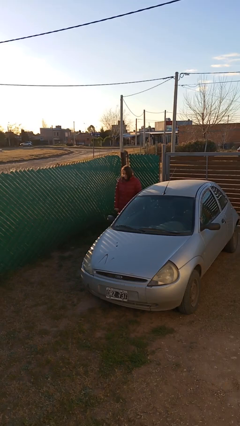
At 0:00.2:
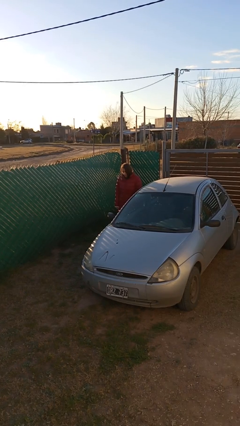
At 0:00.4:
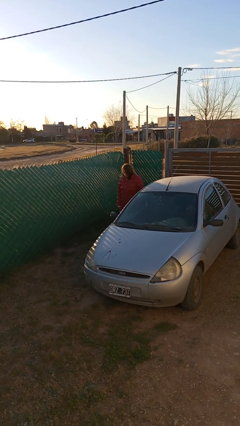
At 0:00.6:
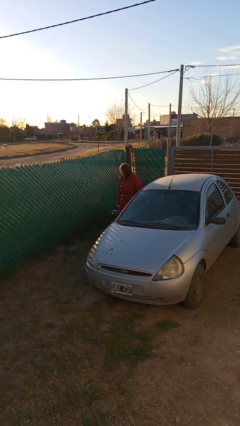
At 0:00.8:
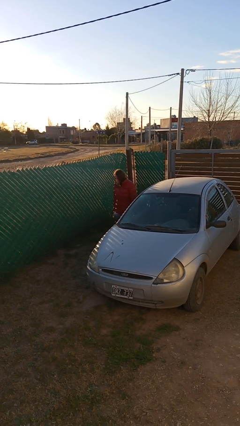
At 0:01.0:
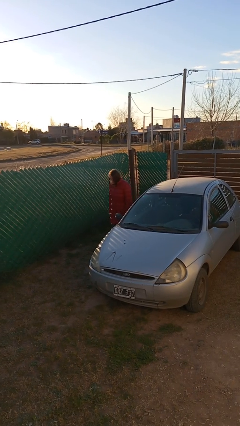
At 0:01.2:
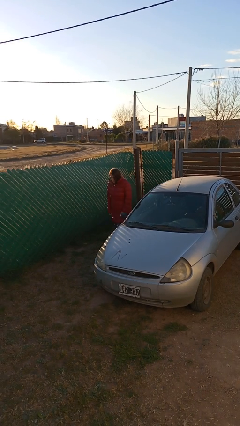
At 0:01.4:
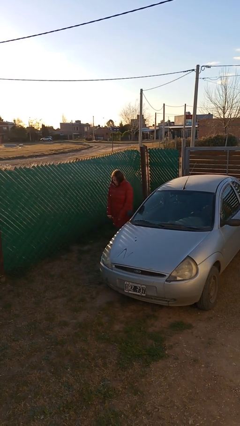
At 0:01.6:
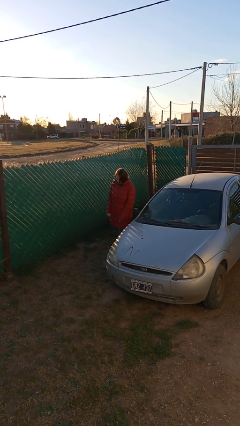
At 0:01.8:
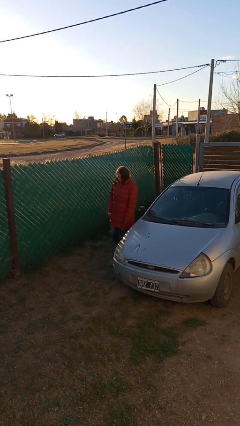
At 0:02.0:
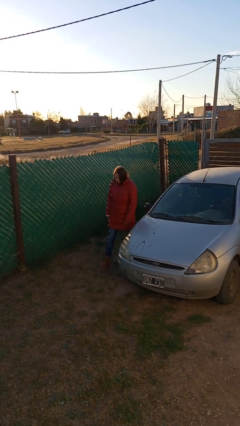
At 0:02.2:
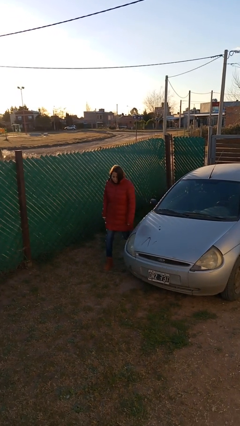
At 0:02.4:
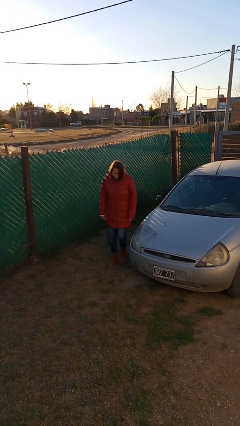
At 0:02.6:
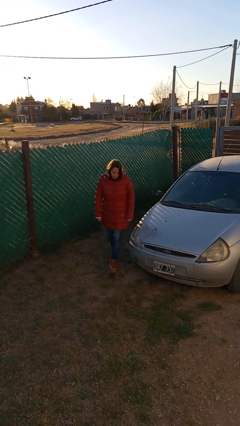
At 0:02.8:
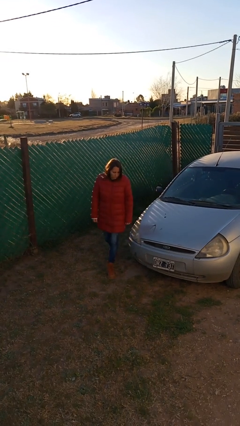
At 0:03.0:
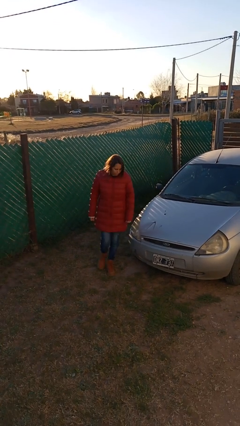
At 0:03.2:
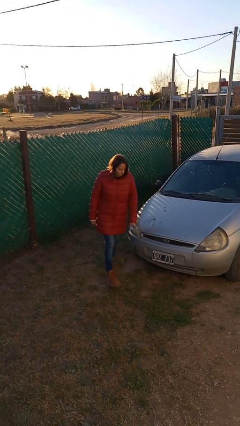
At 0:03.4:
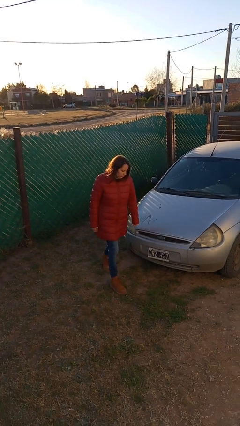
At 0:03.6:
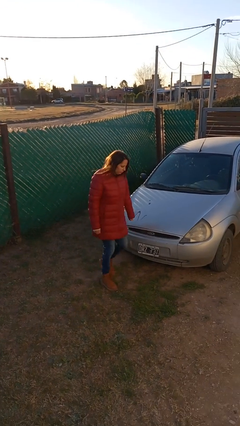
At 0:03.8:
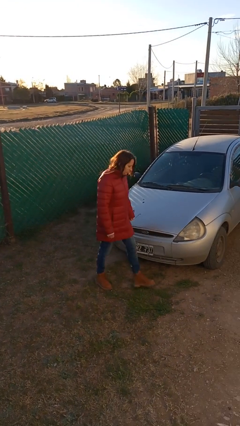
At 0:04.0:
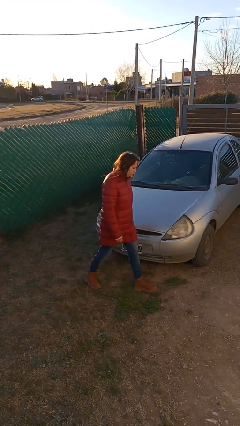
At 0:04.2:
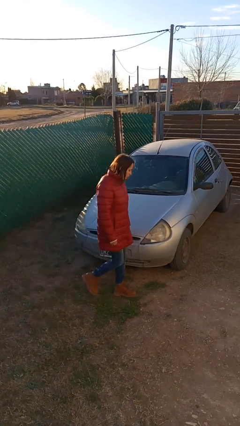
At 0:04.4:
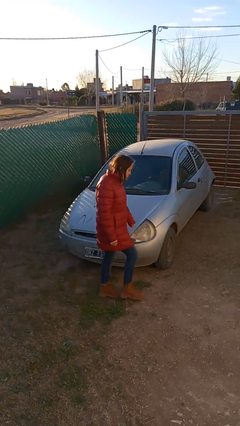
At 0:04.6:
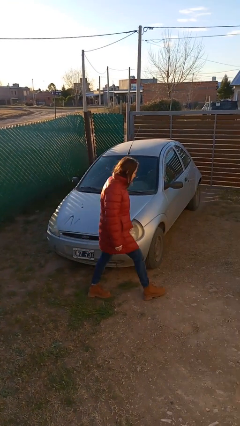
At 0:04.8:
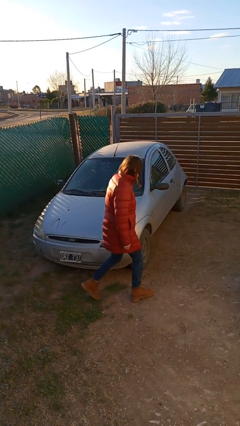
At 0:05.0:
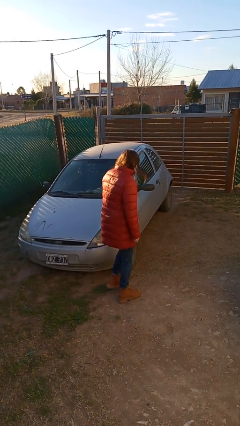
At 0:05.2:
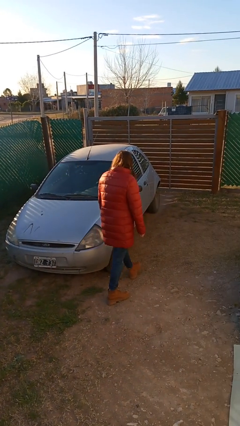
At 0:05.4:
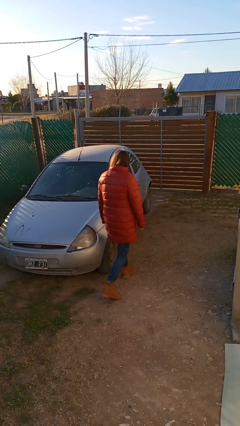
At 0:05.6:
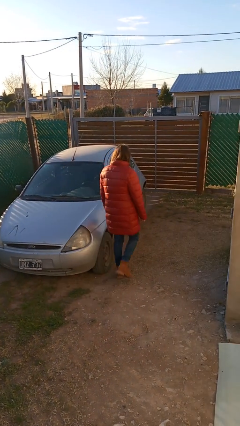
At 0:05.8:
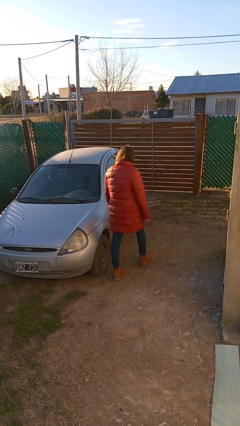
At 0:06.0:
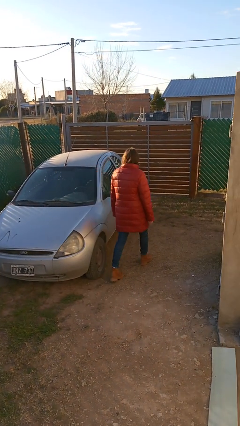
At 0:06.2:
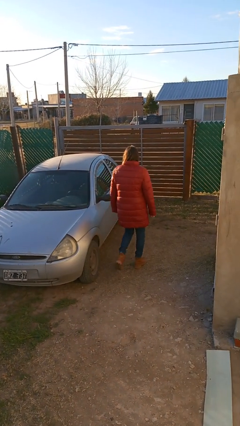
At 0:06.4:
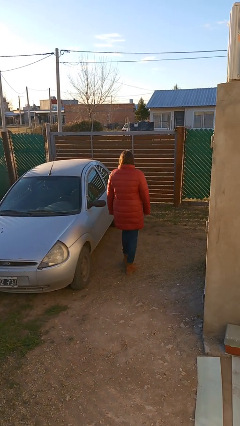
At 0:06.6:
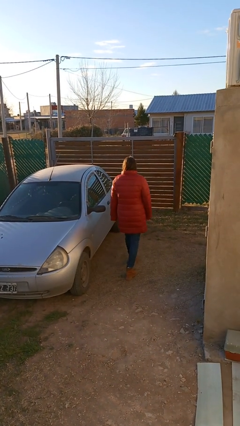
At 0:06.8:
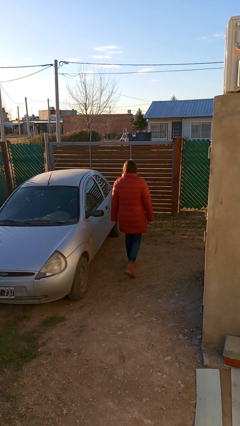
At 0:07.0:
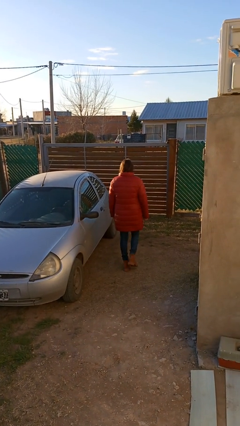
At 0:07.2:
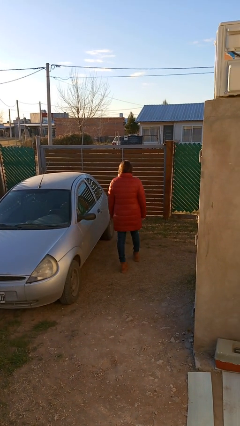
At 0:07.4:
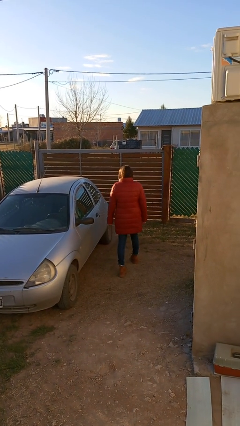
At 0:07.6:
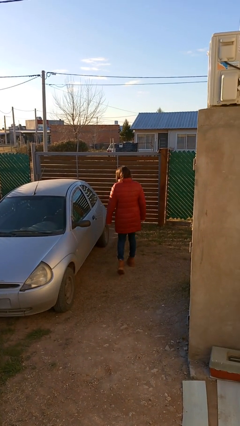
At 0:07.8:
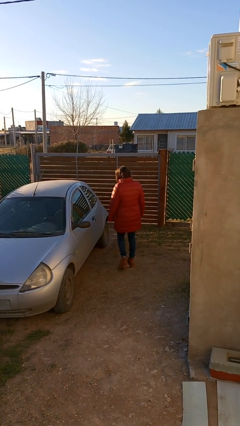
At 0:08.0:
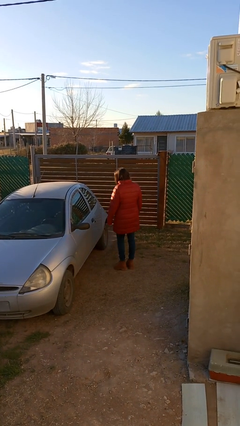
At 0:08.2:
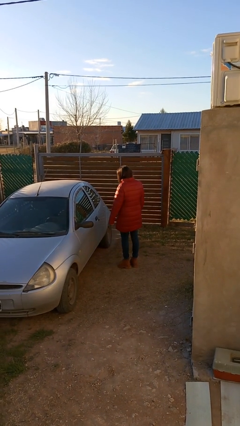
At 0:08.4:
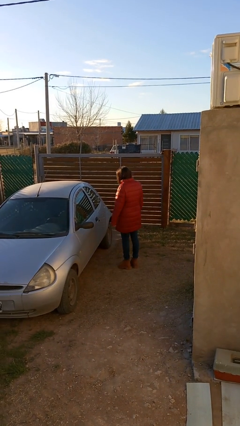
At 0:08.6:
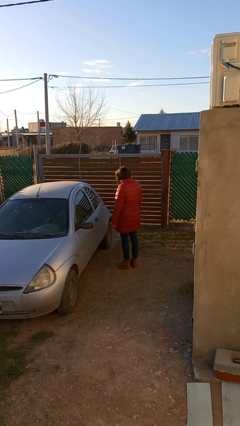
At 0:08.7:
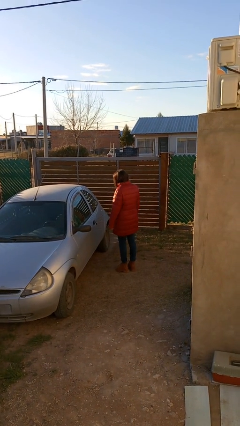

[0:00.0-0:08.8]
person walks around car

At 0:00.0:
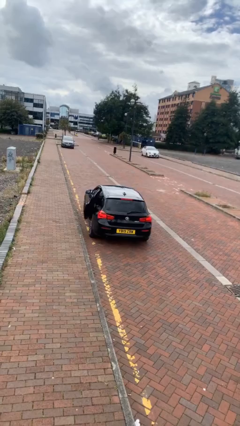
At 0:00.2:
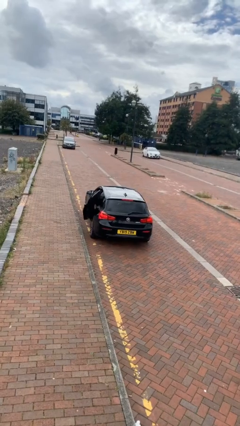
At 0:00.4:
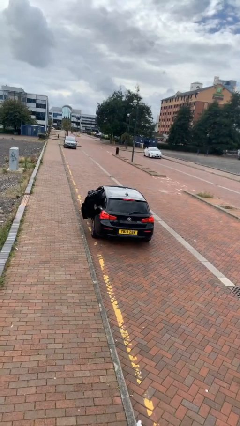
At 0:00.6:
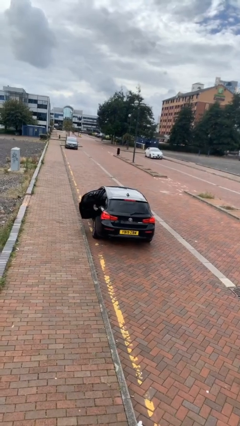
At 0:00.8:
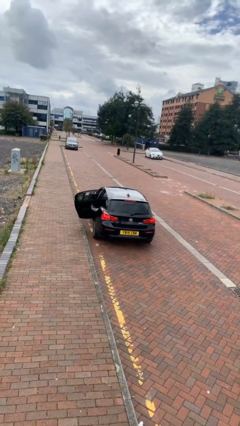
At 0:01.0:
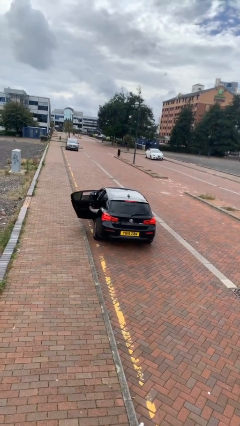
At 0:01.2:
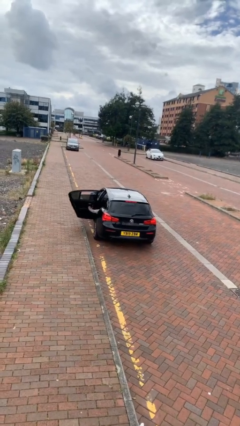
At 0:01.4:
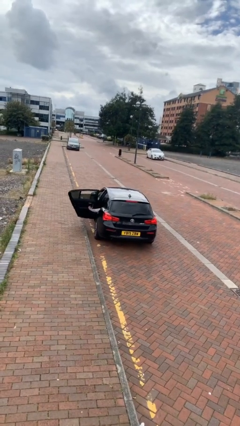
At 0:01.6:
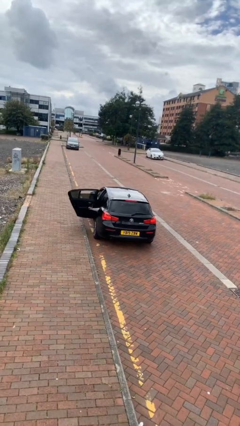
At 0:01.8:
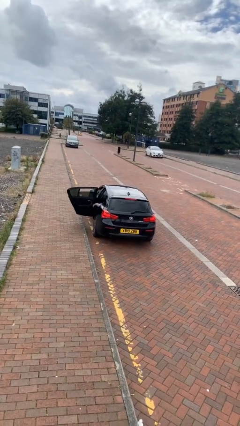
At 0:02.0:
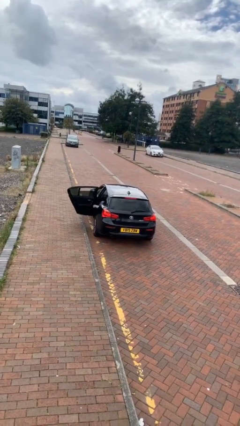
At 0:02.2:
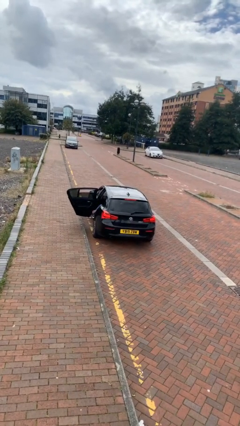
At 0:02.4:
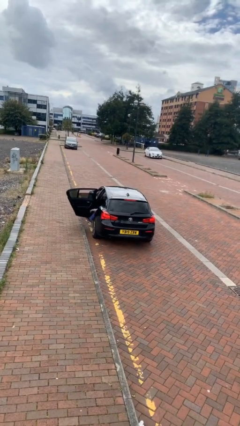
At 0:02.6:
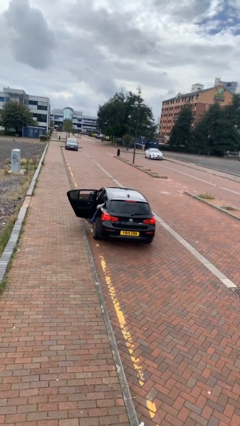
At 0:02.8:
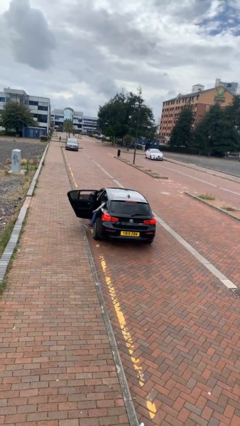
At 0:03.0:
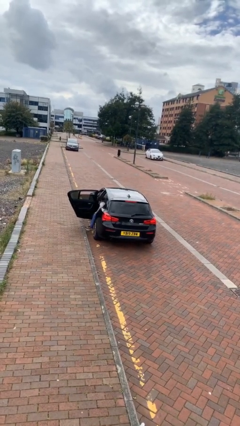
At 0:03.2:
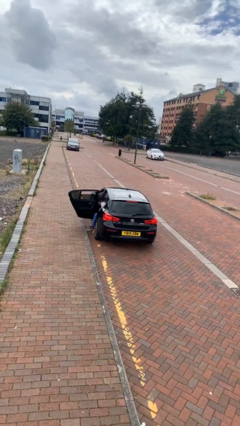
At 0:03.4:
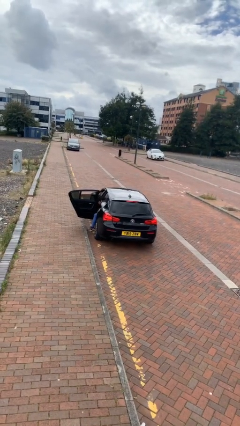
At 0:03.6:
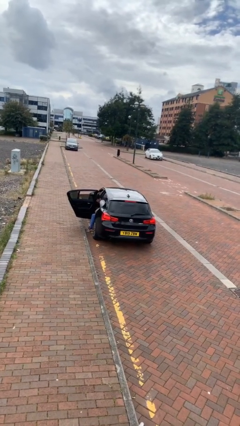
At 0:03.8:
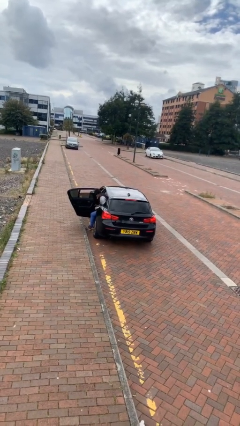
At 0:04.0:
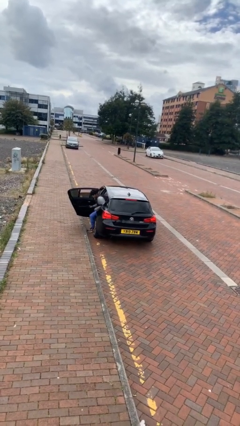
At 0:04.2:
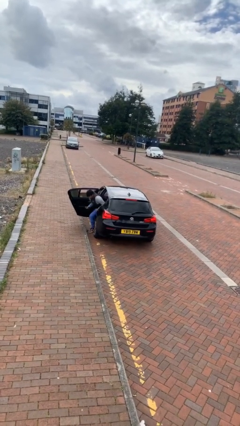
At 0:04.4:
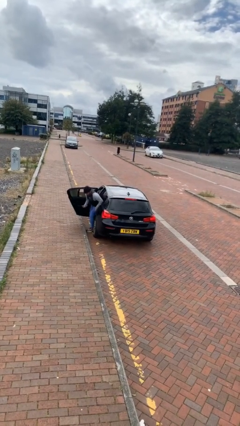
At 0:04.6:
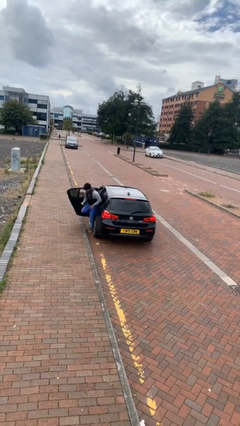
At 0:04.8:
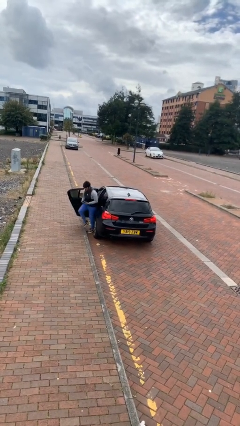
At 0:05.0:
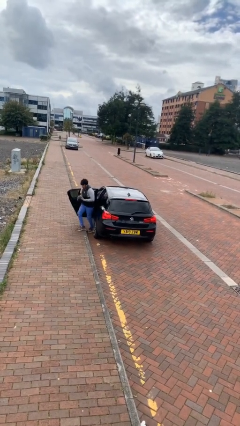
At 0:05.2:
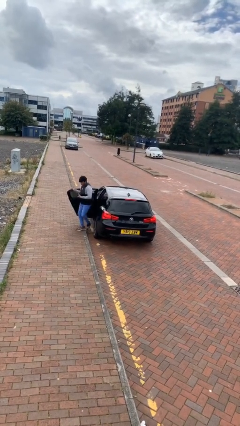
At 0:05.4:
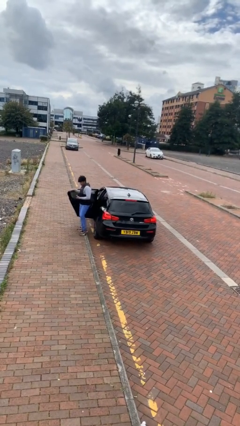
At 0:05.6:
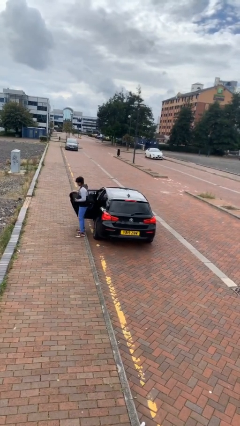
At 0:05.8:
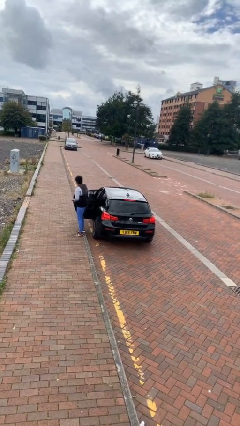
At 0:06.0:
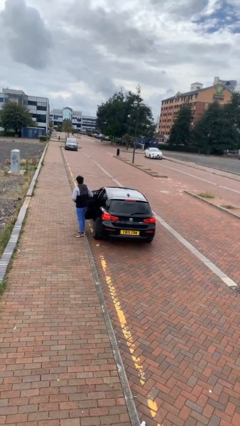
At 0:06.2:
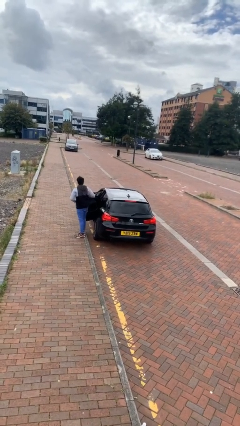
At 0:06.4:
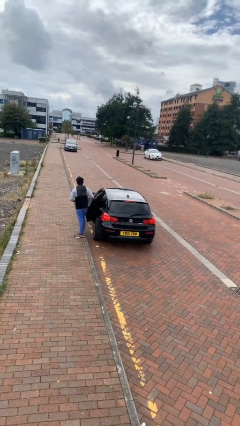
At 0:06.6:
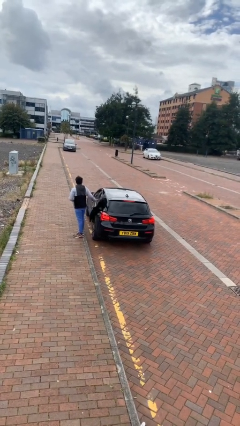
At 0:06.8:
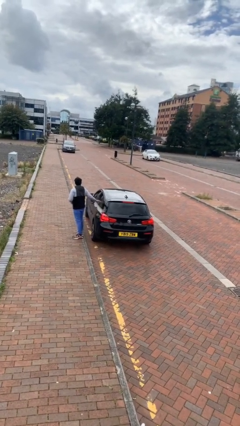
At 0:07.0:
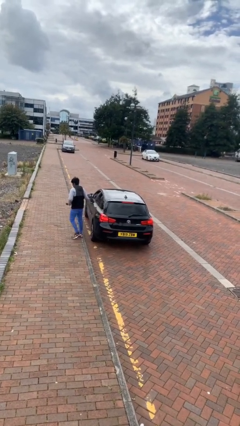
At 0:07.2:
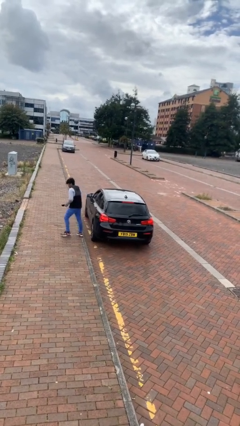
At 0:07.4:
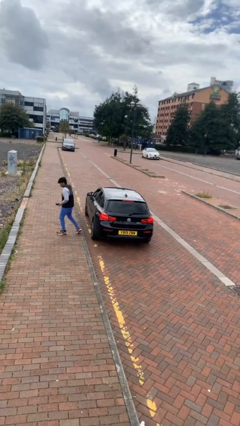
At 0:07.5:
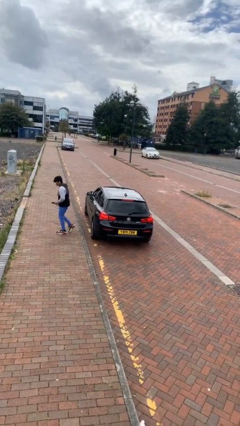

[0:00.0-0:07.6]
car drops off person

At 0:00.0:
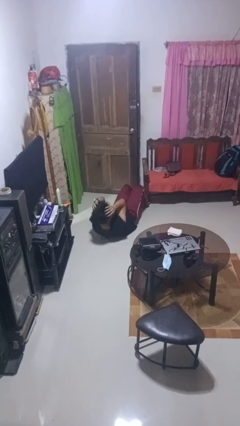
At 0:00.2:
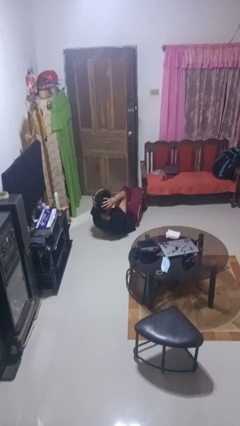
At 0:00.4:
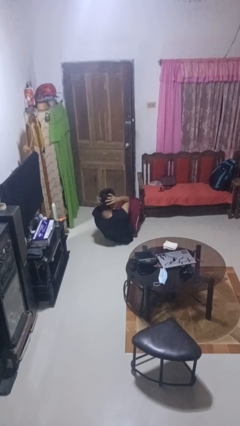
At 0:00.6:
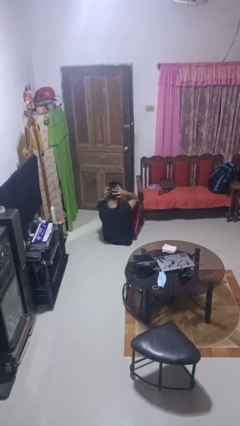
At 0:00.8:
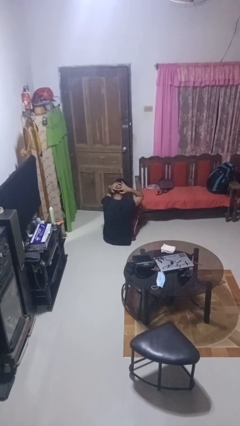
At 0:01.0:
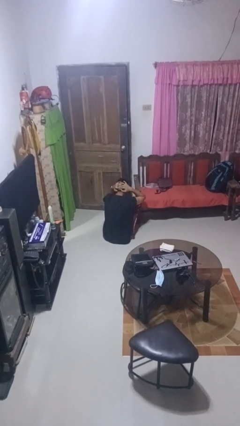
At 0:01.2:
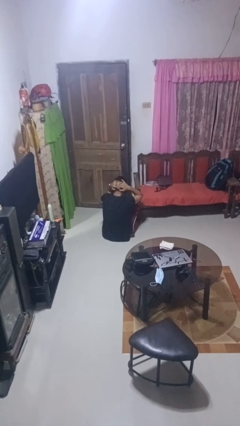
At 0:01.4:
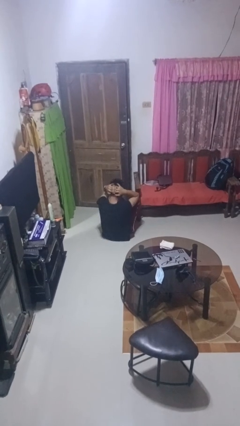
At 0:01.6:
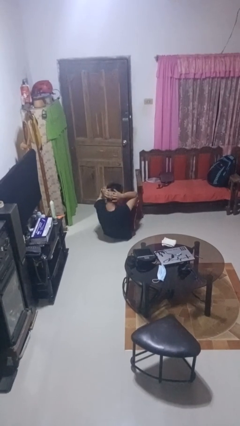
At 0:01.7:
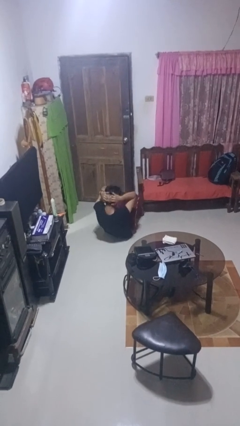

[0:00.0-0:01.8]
person exercises with situp
